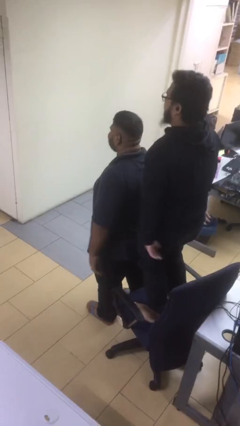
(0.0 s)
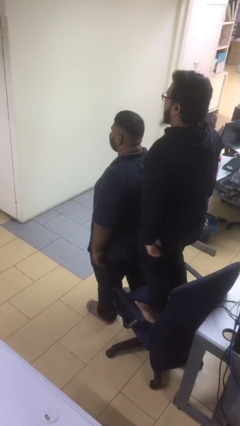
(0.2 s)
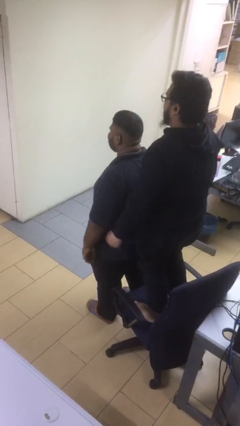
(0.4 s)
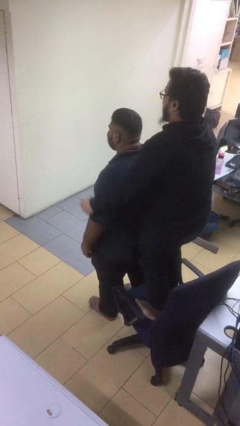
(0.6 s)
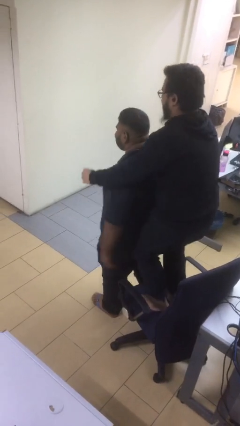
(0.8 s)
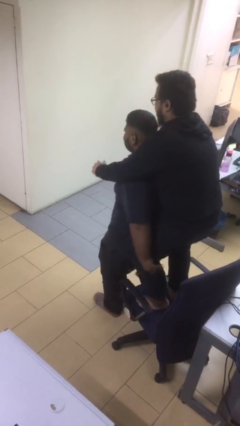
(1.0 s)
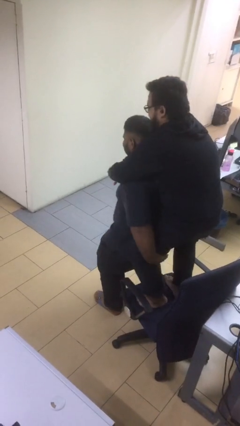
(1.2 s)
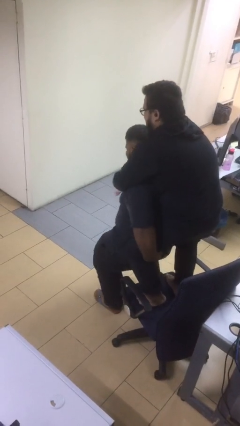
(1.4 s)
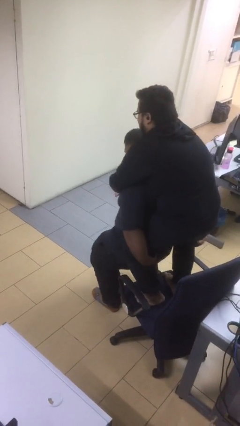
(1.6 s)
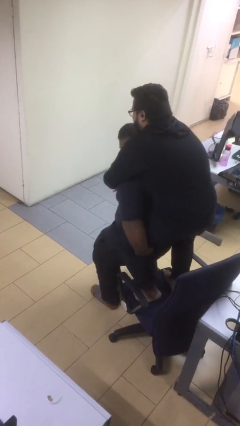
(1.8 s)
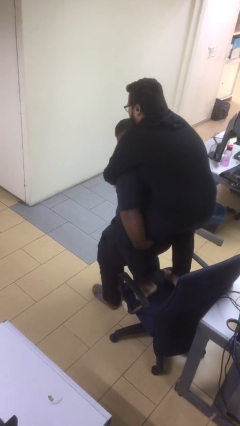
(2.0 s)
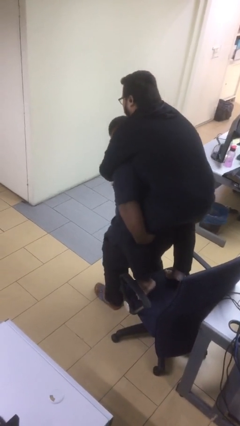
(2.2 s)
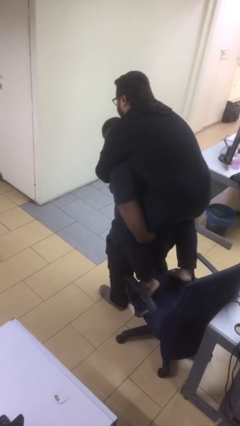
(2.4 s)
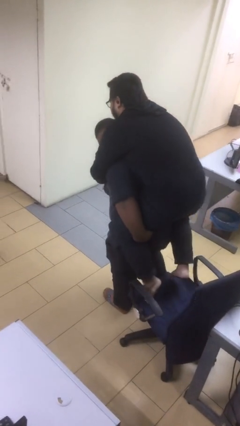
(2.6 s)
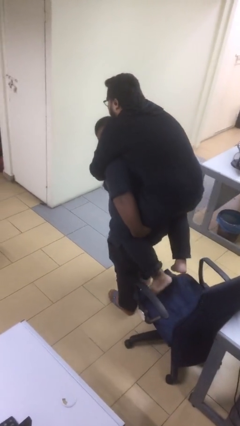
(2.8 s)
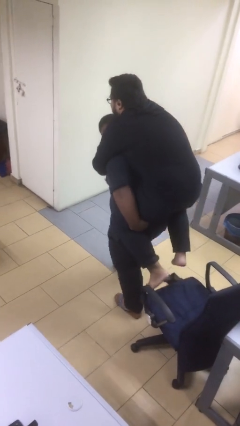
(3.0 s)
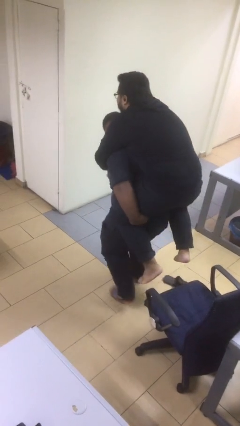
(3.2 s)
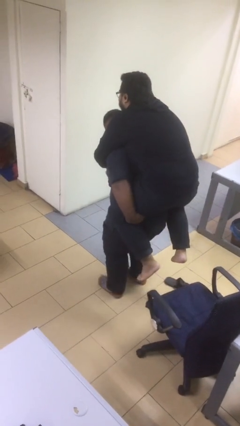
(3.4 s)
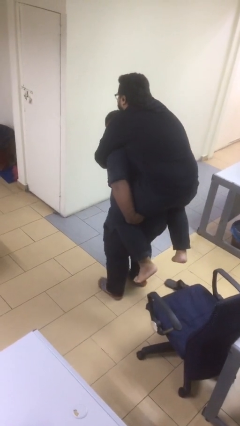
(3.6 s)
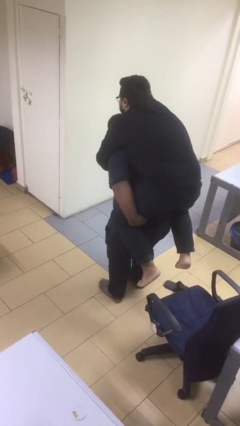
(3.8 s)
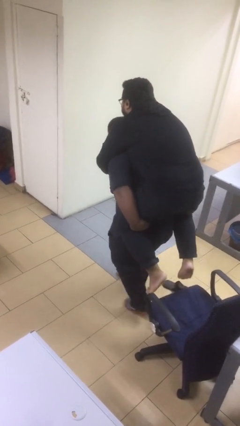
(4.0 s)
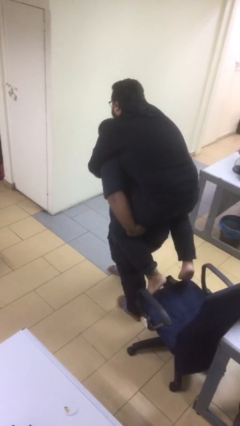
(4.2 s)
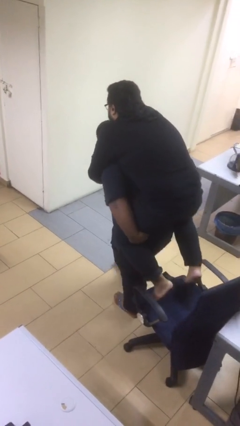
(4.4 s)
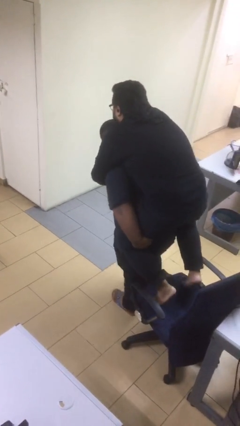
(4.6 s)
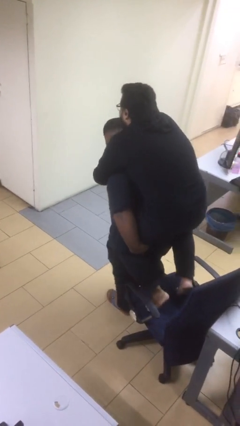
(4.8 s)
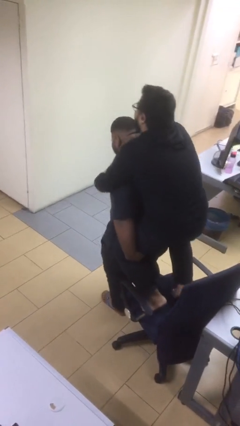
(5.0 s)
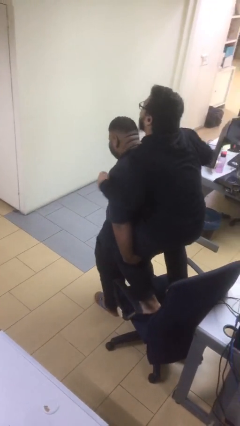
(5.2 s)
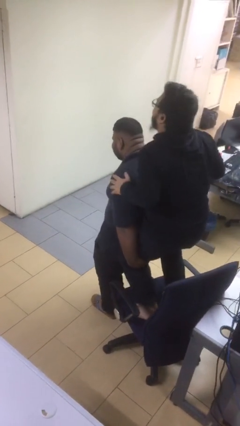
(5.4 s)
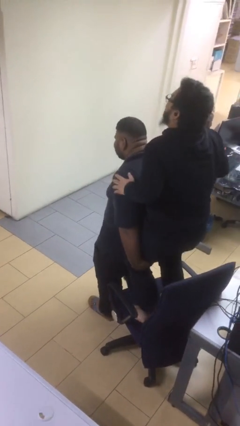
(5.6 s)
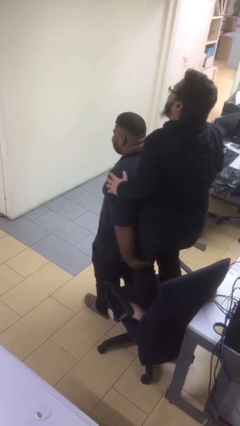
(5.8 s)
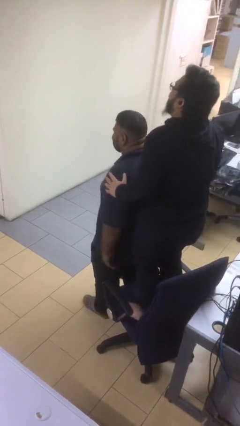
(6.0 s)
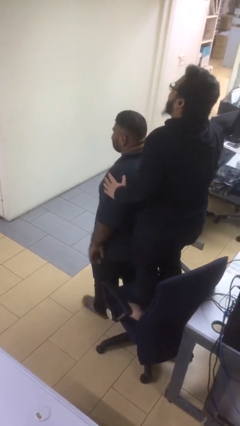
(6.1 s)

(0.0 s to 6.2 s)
person carries person on back

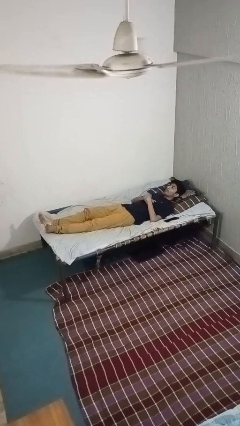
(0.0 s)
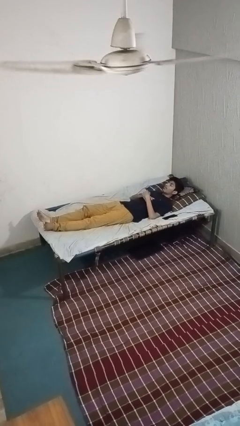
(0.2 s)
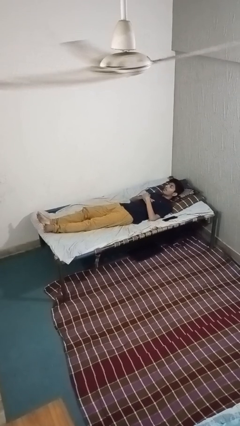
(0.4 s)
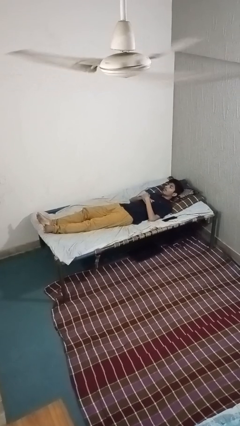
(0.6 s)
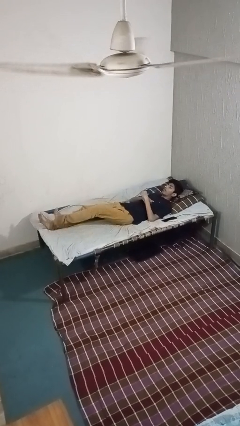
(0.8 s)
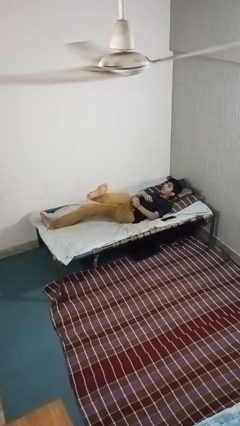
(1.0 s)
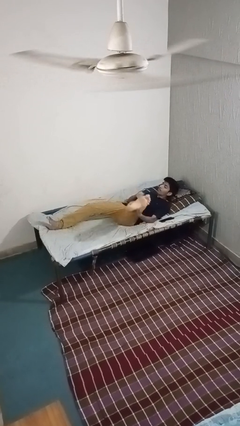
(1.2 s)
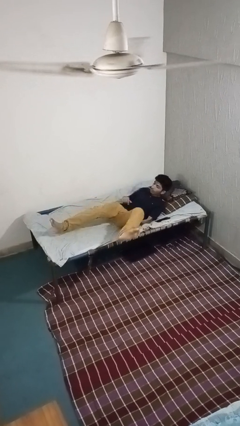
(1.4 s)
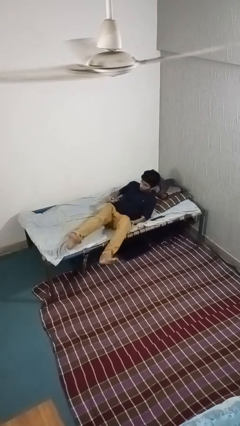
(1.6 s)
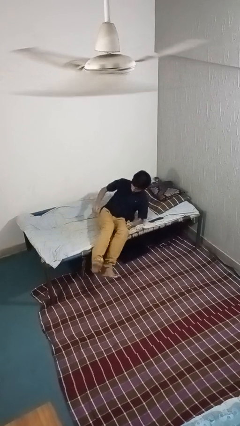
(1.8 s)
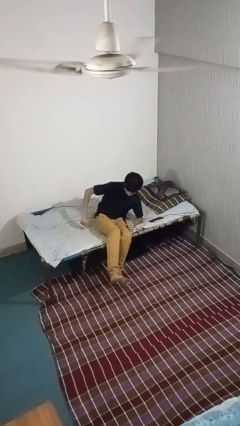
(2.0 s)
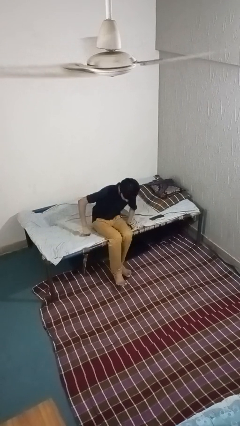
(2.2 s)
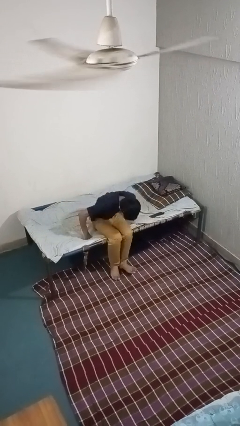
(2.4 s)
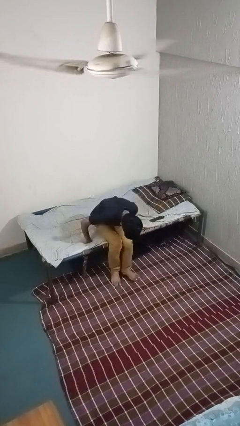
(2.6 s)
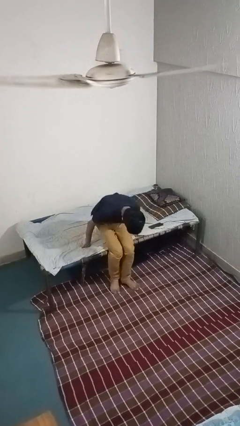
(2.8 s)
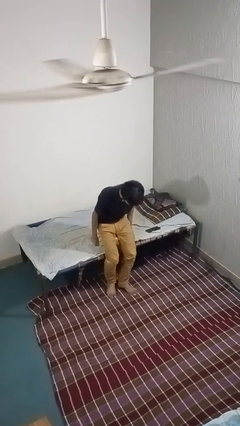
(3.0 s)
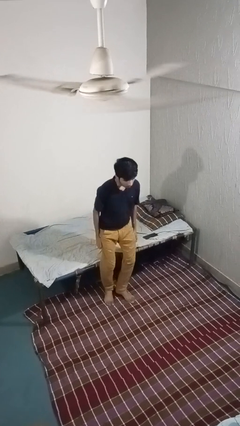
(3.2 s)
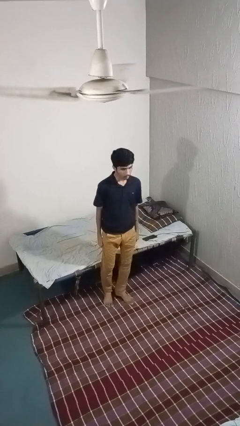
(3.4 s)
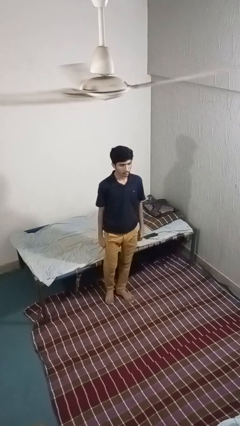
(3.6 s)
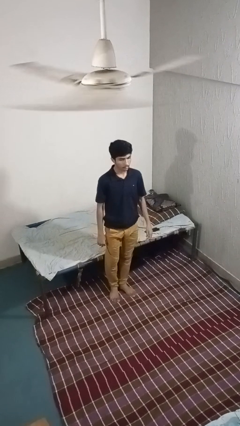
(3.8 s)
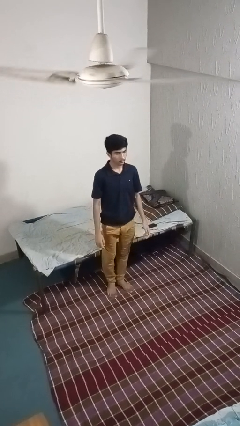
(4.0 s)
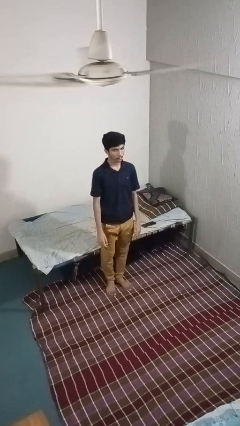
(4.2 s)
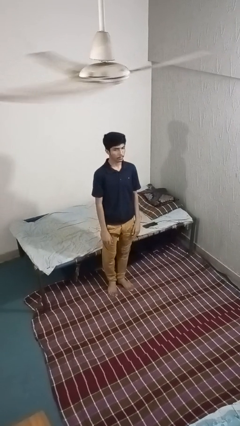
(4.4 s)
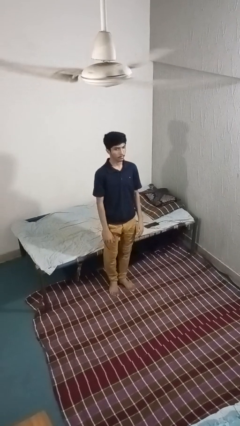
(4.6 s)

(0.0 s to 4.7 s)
person stands up

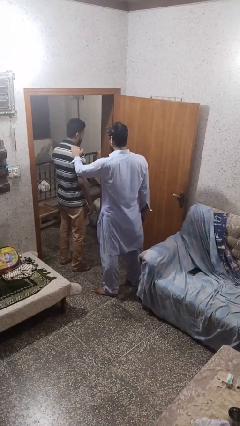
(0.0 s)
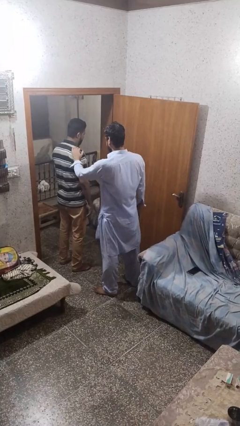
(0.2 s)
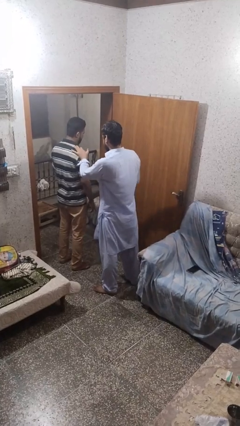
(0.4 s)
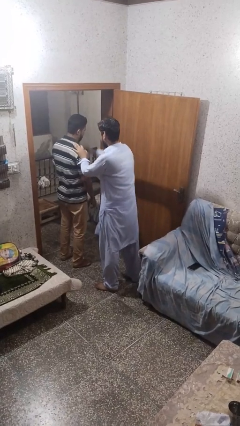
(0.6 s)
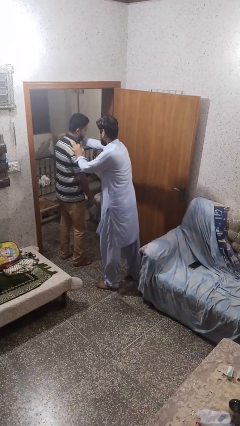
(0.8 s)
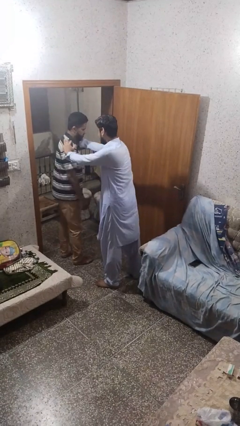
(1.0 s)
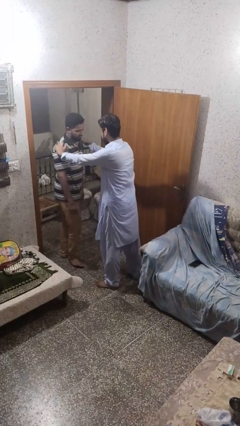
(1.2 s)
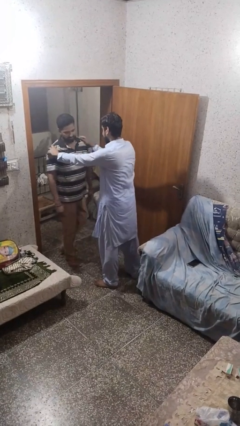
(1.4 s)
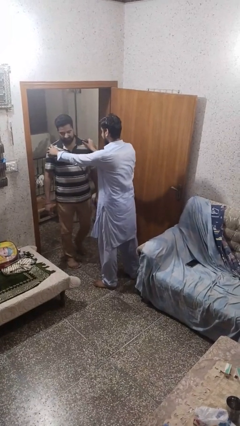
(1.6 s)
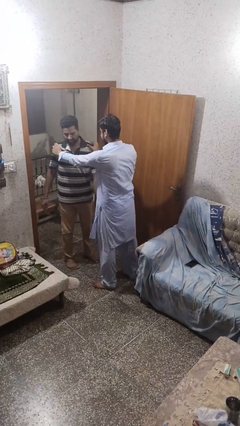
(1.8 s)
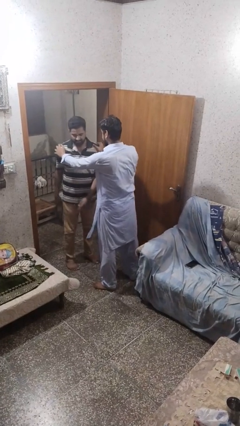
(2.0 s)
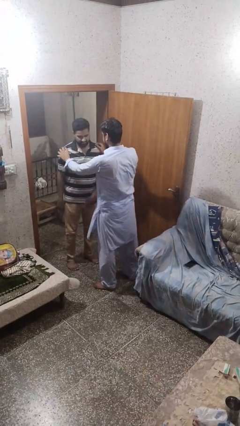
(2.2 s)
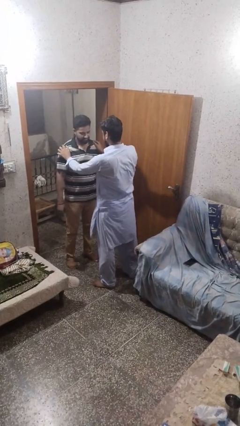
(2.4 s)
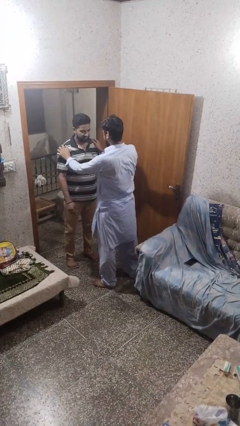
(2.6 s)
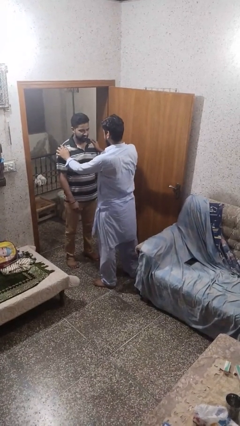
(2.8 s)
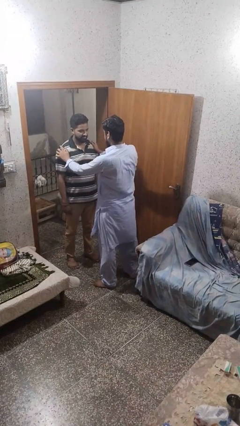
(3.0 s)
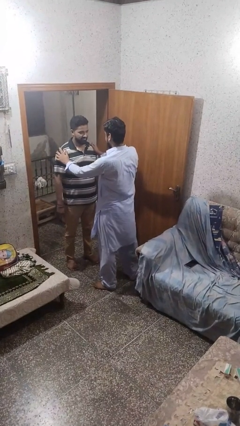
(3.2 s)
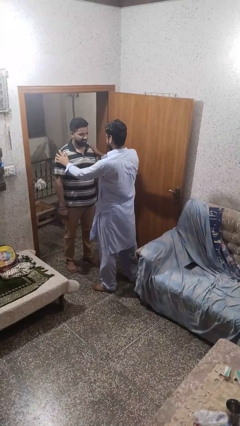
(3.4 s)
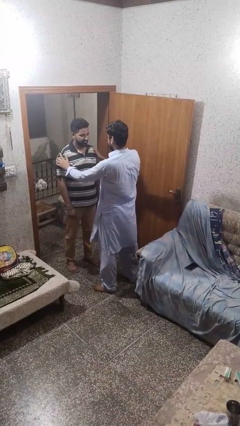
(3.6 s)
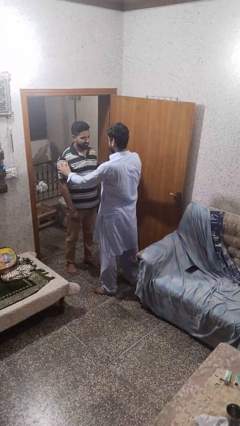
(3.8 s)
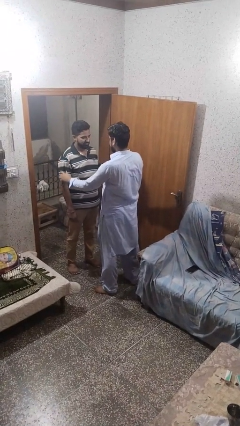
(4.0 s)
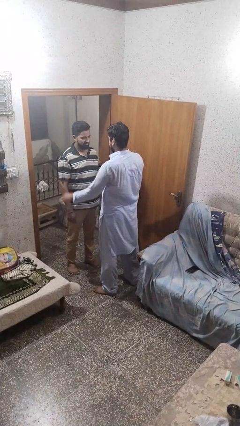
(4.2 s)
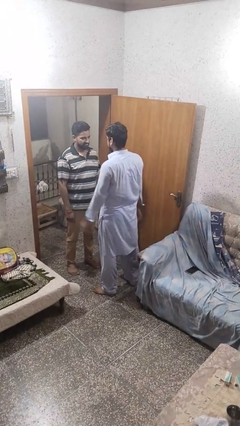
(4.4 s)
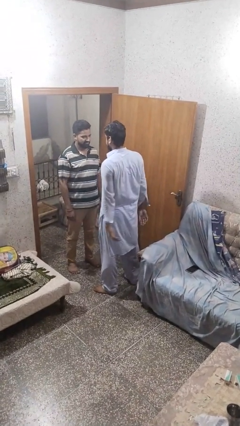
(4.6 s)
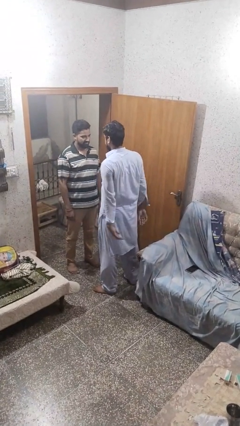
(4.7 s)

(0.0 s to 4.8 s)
person spins person around

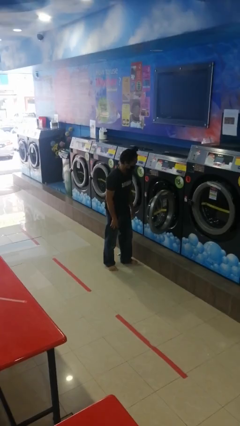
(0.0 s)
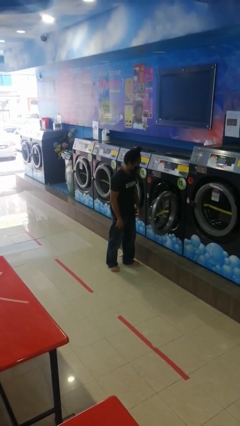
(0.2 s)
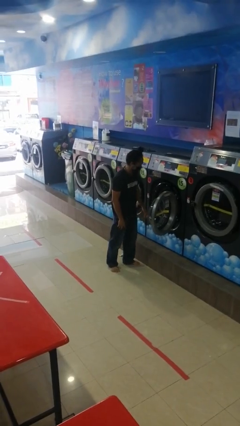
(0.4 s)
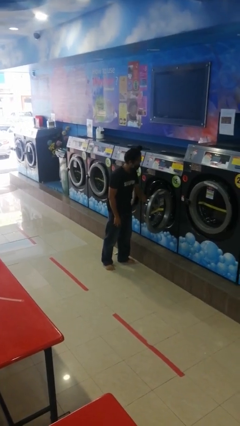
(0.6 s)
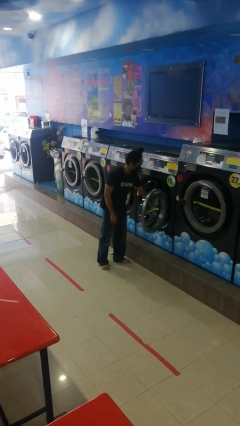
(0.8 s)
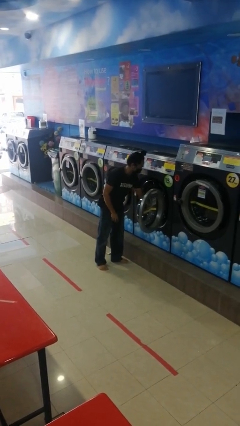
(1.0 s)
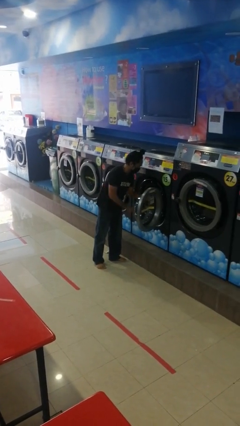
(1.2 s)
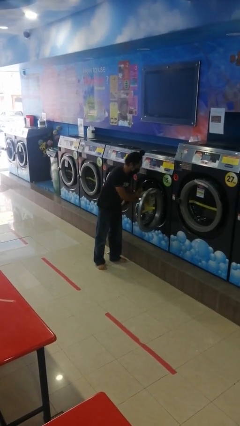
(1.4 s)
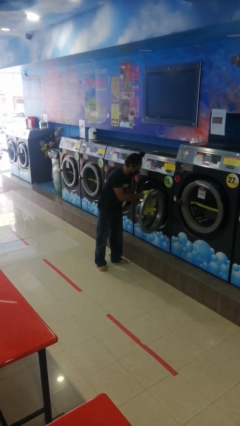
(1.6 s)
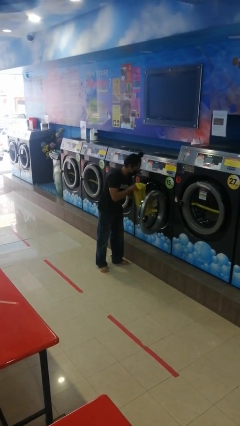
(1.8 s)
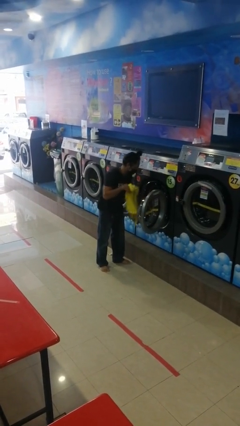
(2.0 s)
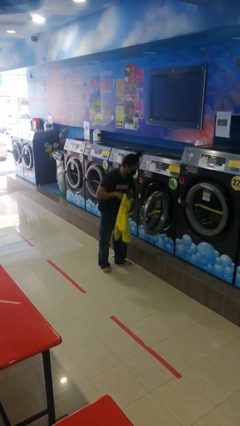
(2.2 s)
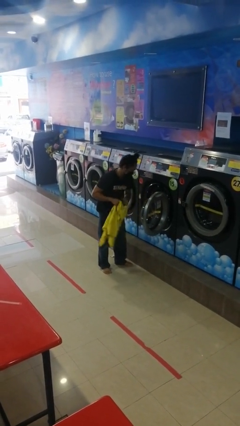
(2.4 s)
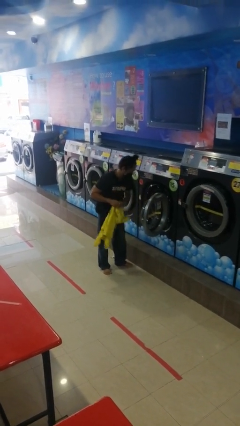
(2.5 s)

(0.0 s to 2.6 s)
person unloads clotheswasher
